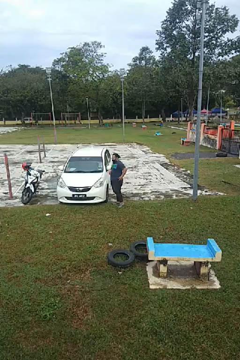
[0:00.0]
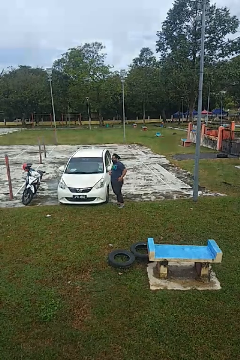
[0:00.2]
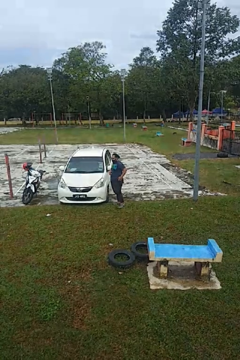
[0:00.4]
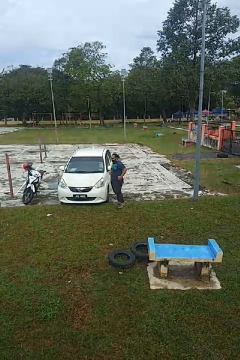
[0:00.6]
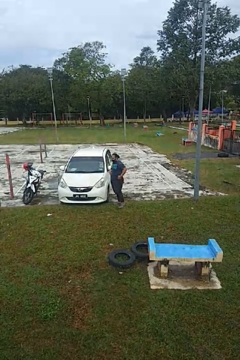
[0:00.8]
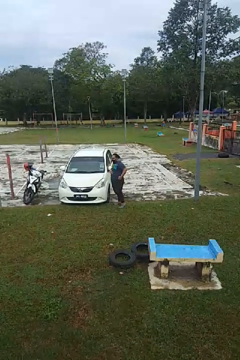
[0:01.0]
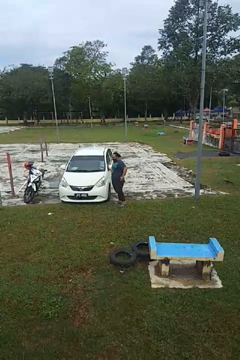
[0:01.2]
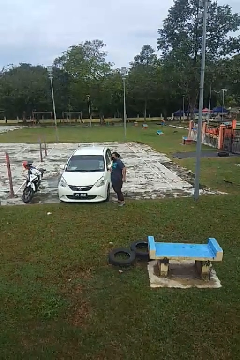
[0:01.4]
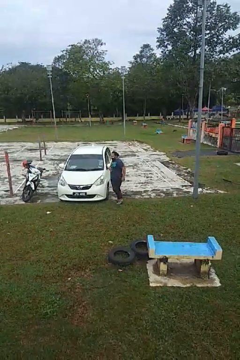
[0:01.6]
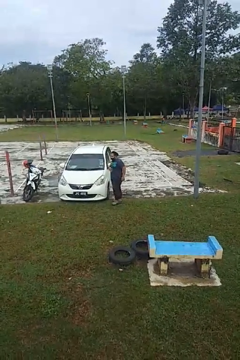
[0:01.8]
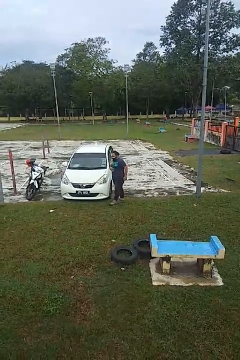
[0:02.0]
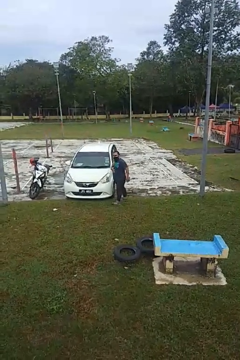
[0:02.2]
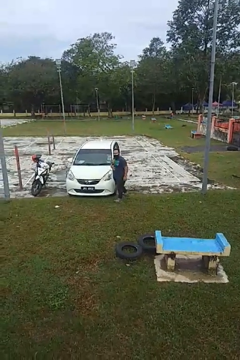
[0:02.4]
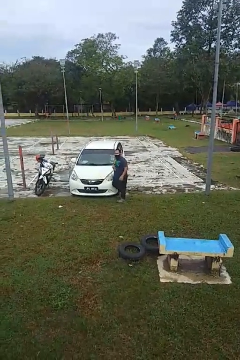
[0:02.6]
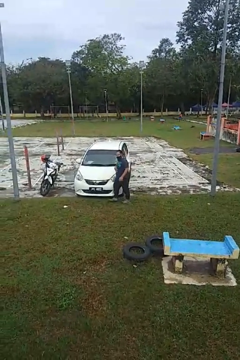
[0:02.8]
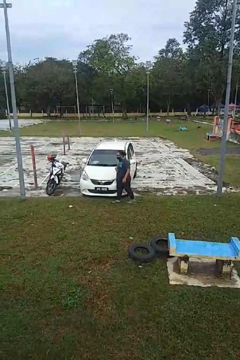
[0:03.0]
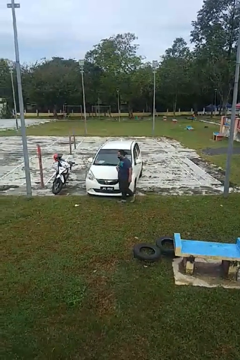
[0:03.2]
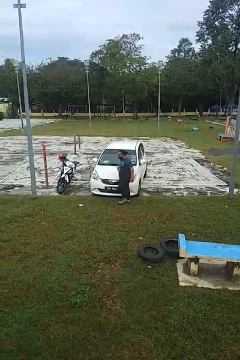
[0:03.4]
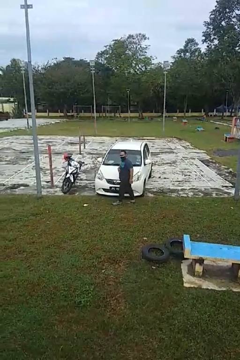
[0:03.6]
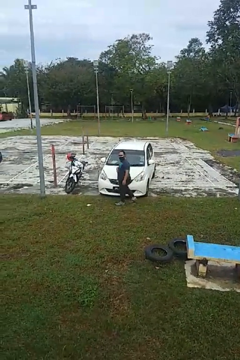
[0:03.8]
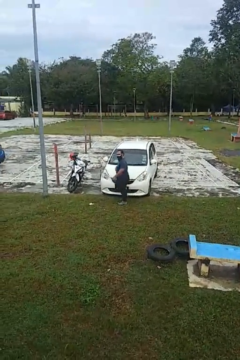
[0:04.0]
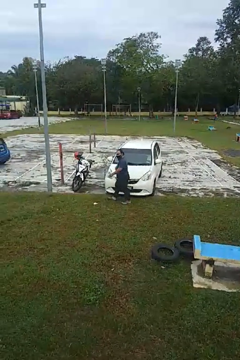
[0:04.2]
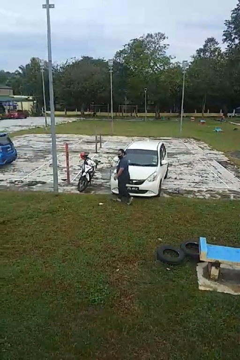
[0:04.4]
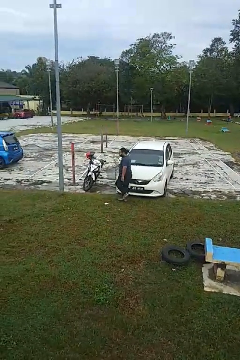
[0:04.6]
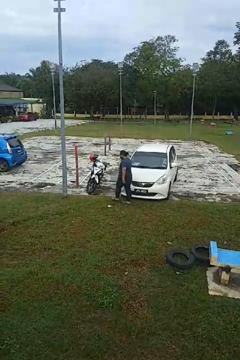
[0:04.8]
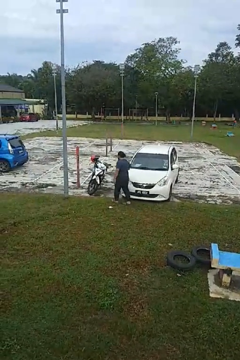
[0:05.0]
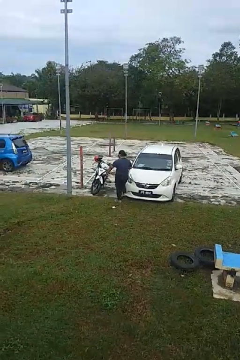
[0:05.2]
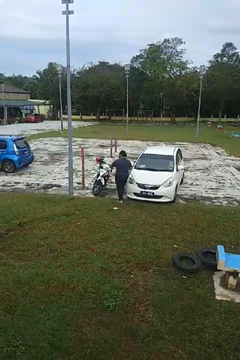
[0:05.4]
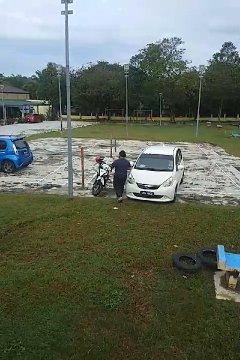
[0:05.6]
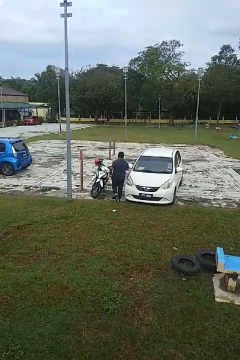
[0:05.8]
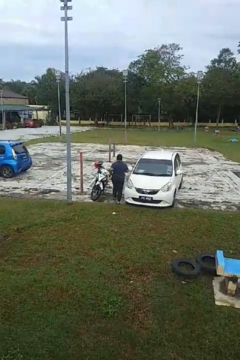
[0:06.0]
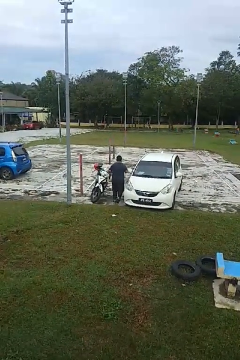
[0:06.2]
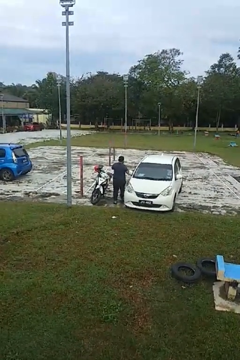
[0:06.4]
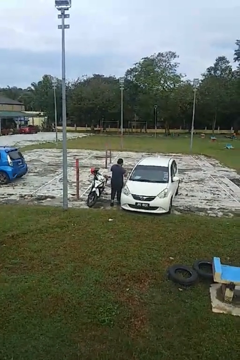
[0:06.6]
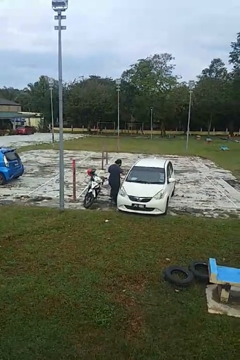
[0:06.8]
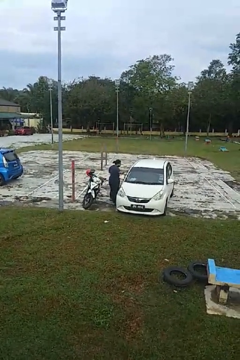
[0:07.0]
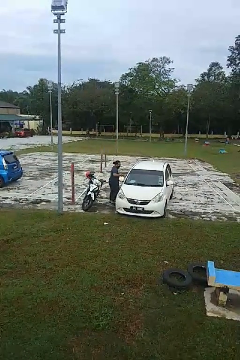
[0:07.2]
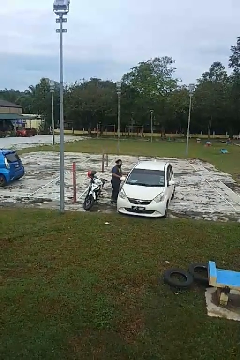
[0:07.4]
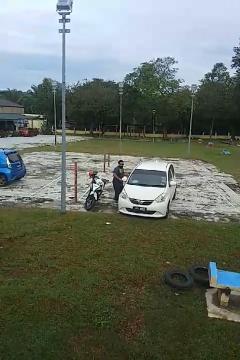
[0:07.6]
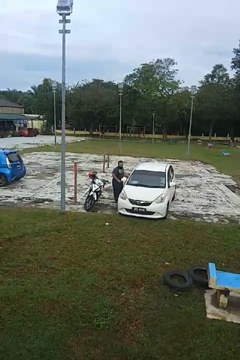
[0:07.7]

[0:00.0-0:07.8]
person walks around car

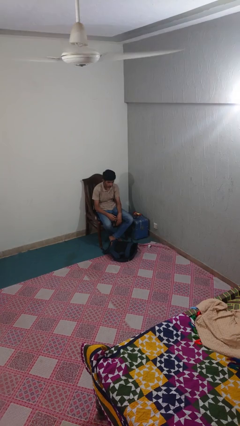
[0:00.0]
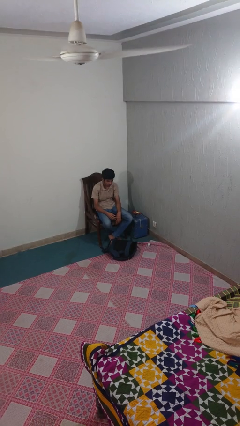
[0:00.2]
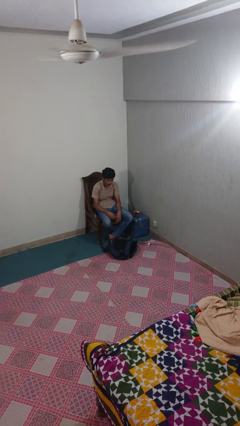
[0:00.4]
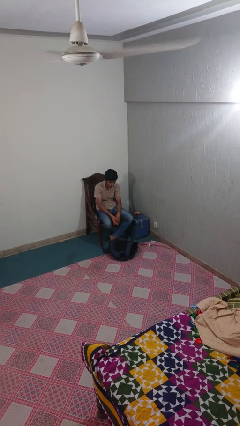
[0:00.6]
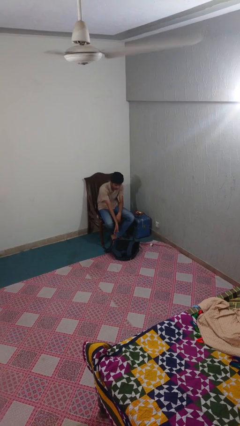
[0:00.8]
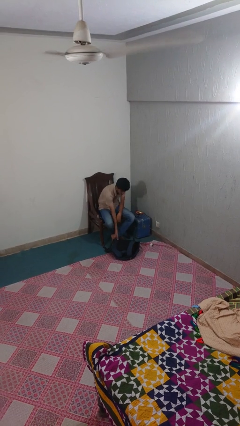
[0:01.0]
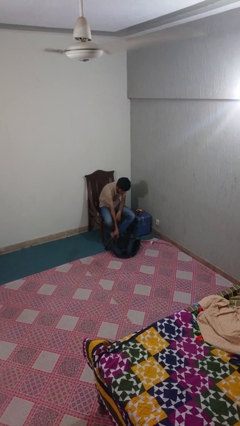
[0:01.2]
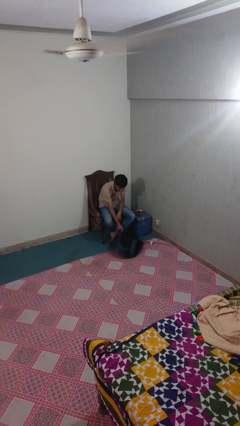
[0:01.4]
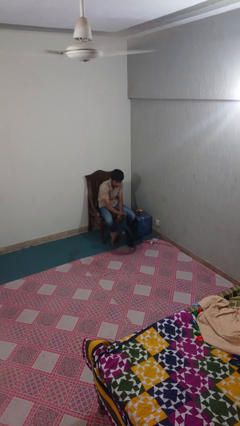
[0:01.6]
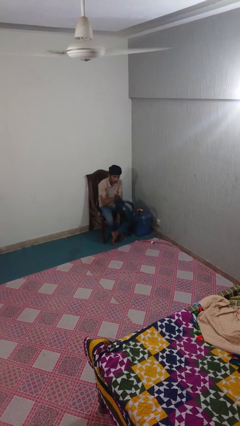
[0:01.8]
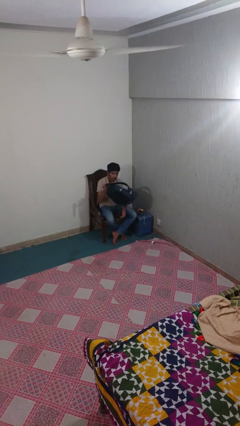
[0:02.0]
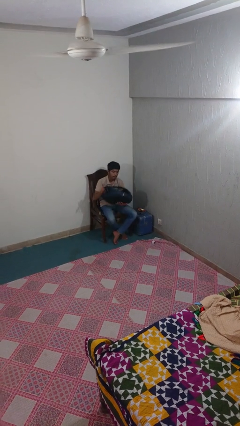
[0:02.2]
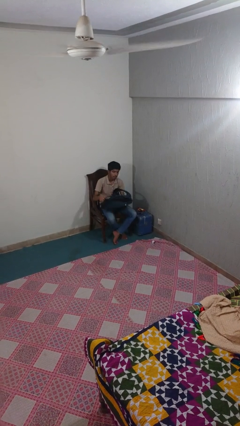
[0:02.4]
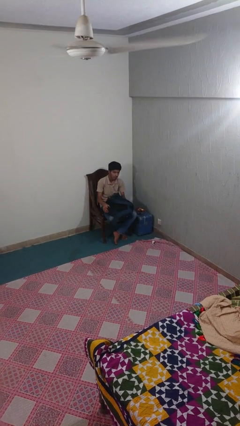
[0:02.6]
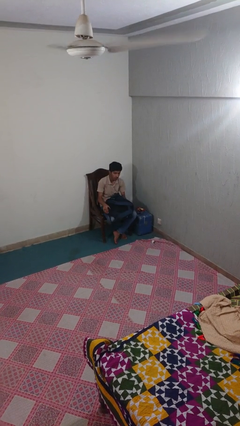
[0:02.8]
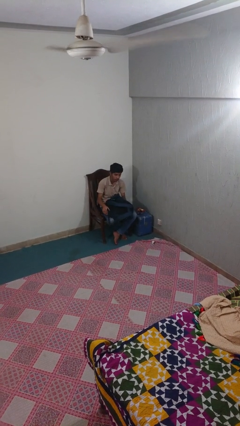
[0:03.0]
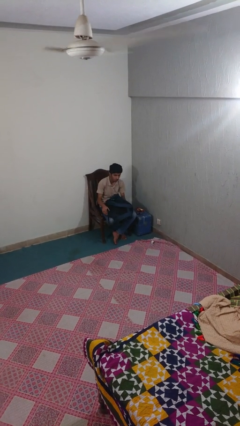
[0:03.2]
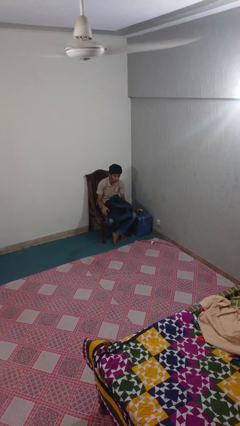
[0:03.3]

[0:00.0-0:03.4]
person picks up object from floor

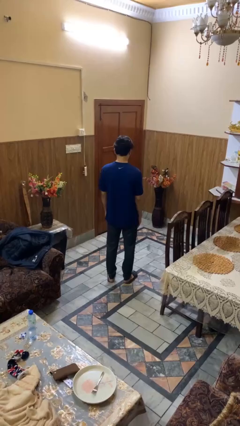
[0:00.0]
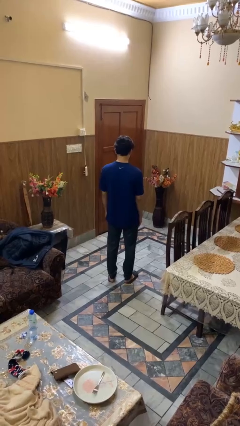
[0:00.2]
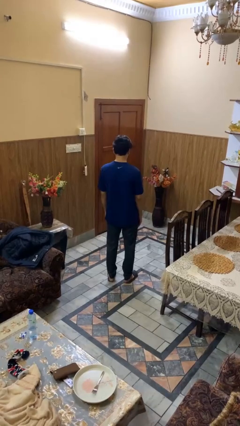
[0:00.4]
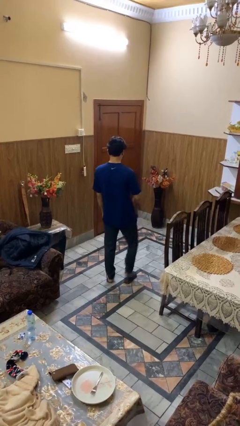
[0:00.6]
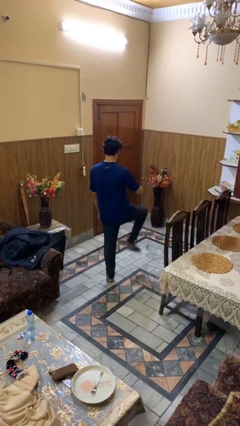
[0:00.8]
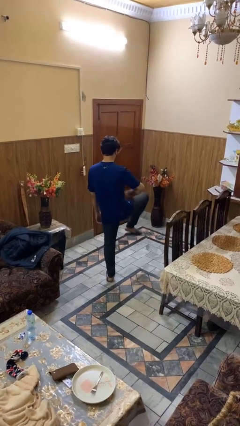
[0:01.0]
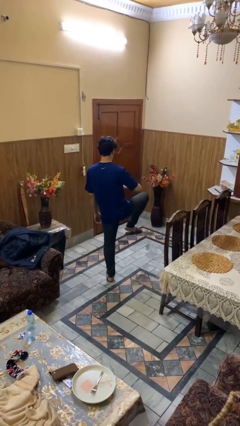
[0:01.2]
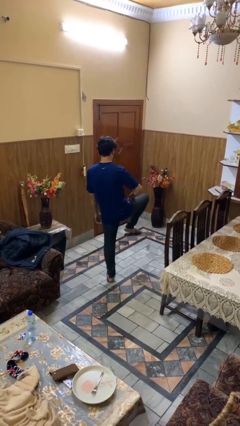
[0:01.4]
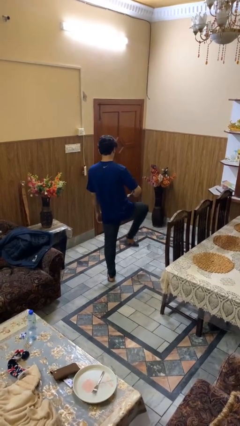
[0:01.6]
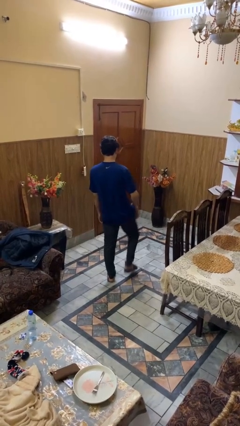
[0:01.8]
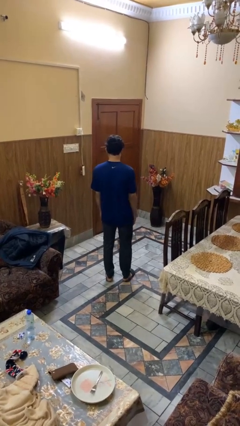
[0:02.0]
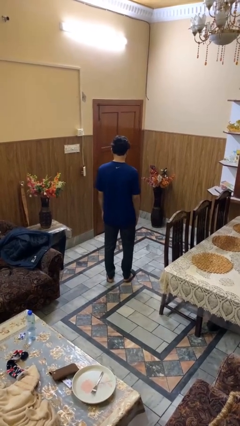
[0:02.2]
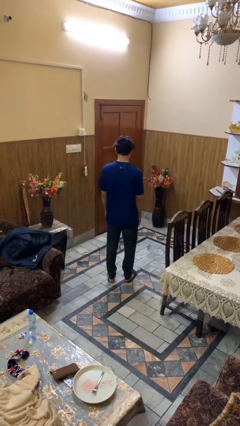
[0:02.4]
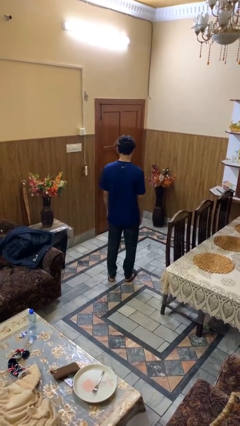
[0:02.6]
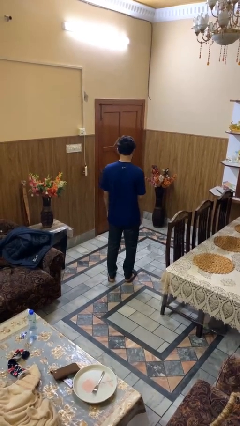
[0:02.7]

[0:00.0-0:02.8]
person slaps hands on thighs

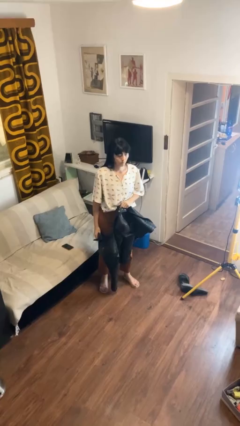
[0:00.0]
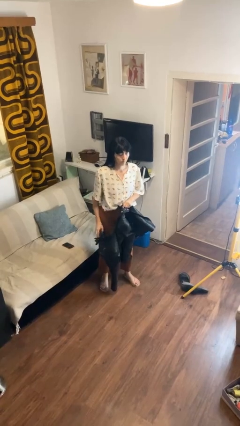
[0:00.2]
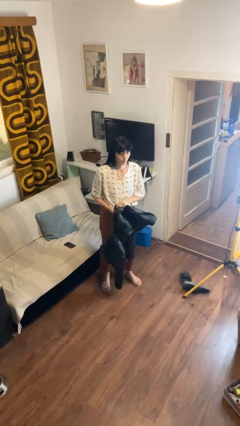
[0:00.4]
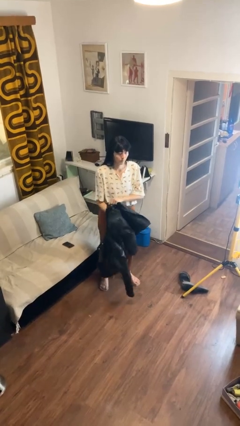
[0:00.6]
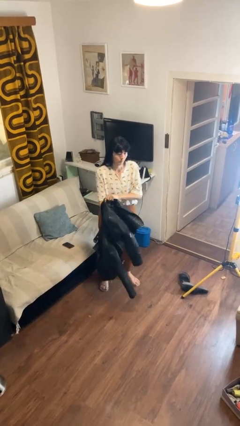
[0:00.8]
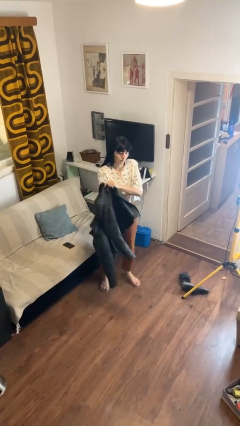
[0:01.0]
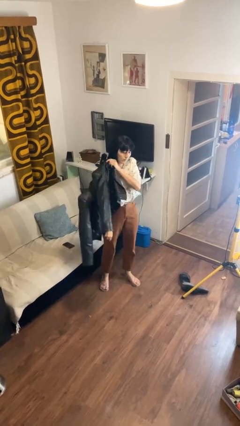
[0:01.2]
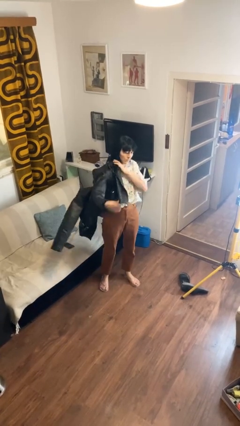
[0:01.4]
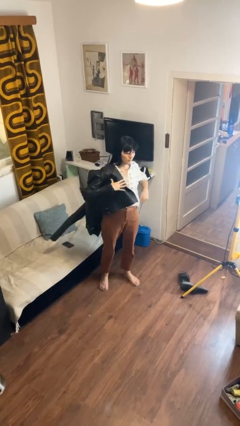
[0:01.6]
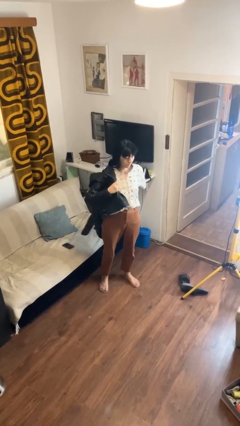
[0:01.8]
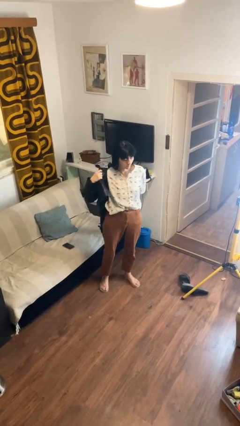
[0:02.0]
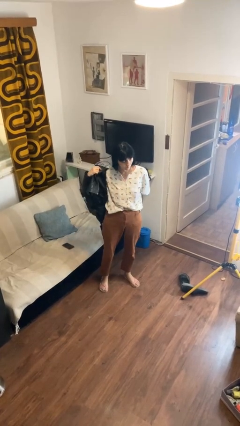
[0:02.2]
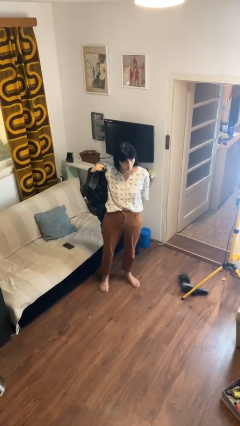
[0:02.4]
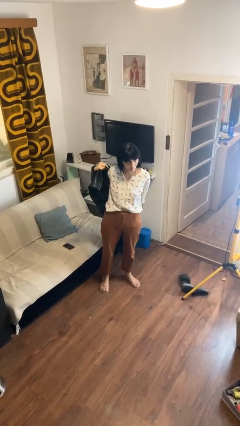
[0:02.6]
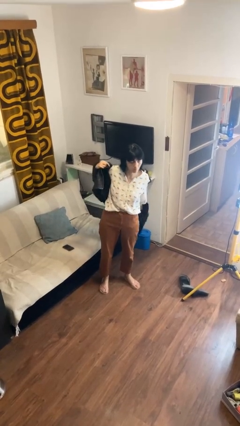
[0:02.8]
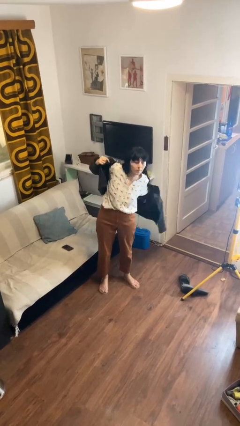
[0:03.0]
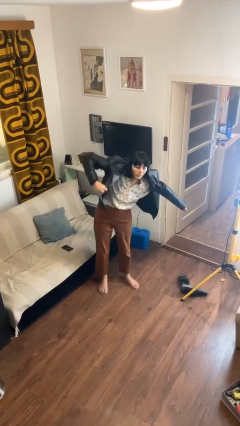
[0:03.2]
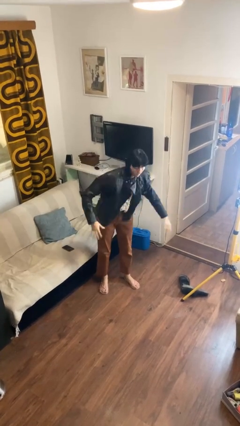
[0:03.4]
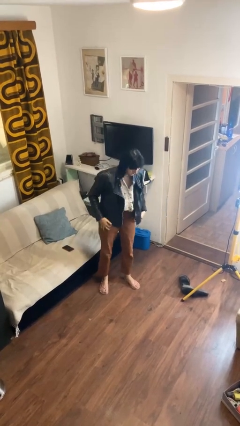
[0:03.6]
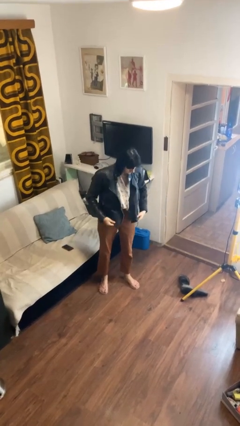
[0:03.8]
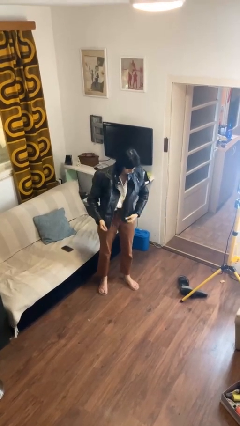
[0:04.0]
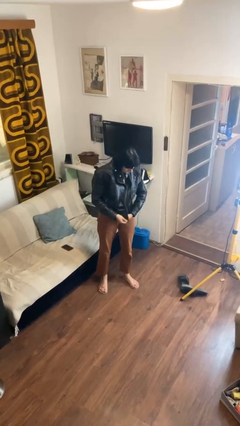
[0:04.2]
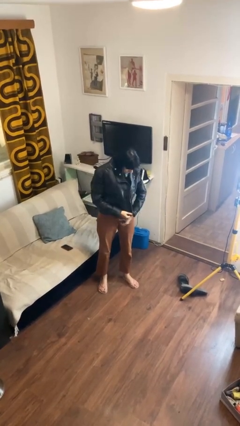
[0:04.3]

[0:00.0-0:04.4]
person puts on jacket

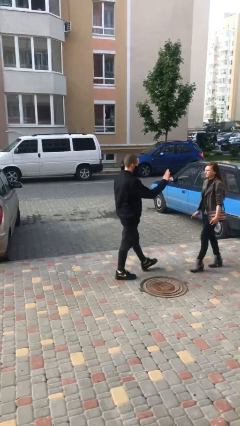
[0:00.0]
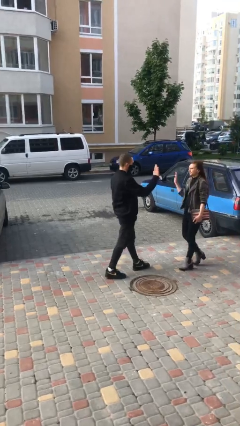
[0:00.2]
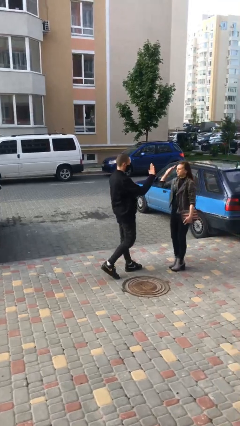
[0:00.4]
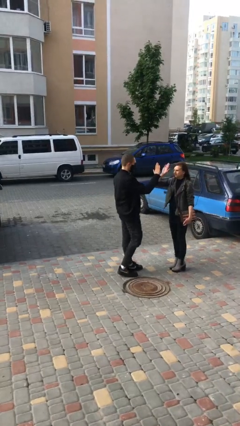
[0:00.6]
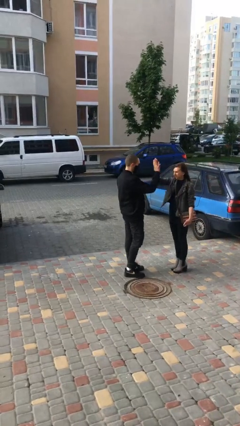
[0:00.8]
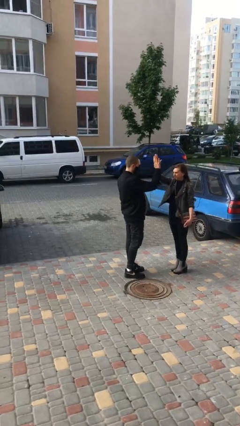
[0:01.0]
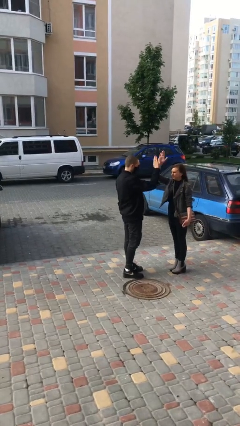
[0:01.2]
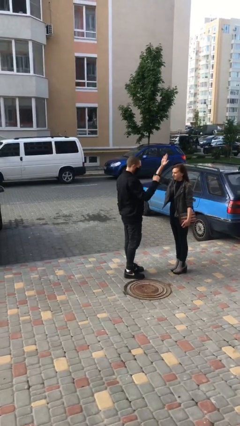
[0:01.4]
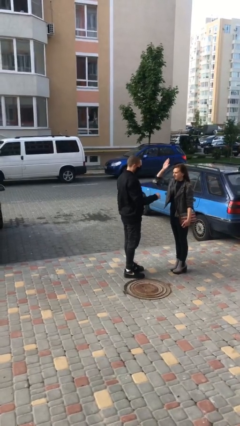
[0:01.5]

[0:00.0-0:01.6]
person highfives hand
